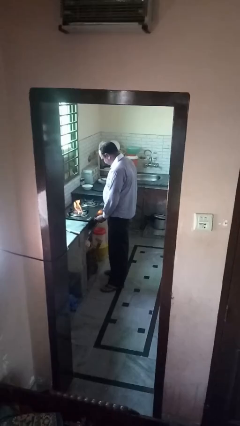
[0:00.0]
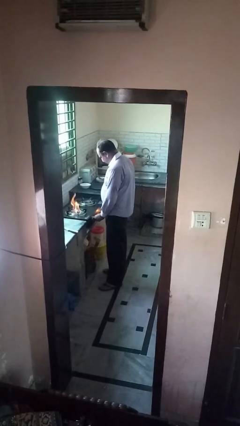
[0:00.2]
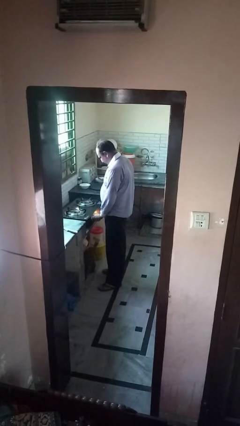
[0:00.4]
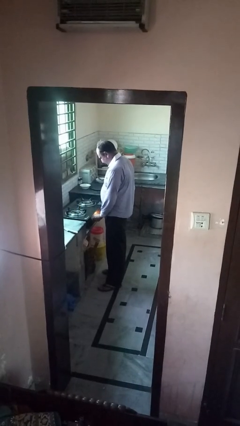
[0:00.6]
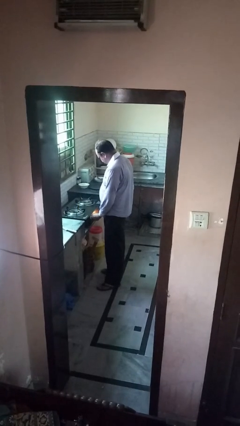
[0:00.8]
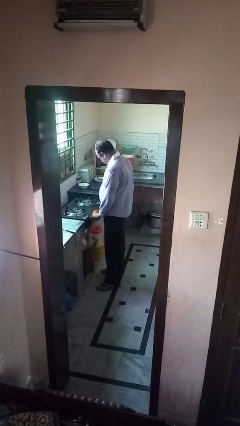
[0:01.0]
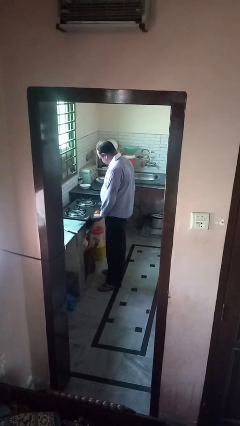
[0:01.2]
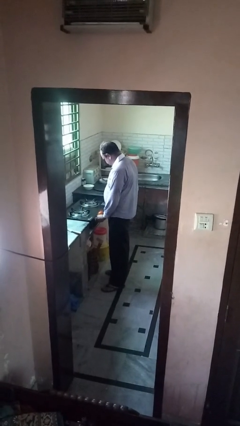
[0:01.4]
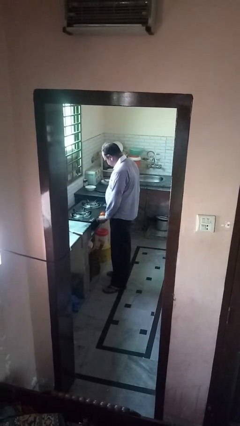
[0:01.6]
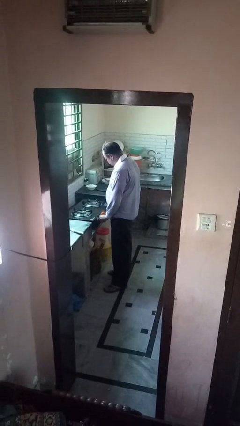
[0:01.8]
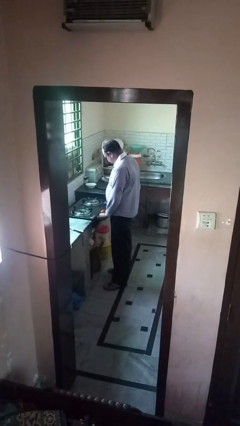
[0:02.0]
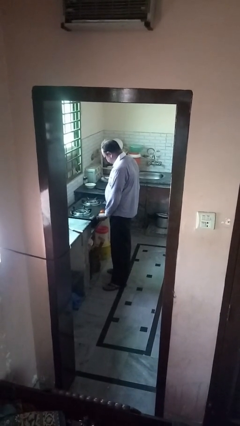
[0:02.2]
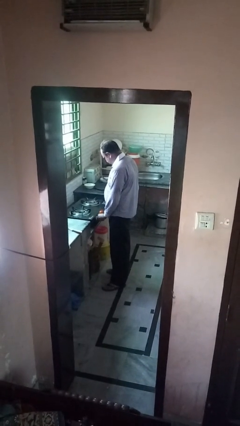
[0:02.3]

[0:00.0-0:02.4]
person turns off stovetop

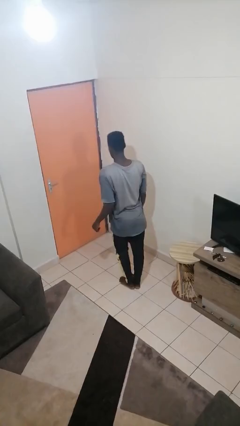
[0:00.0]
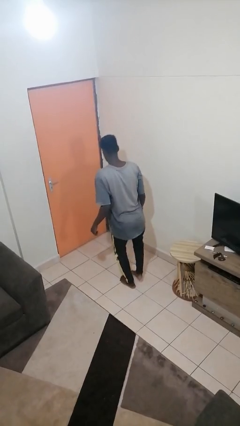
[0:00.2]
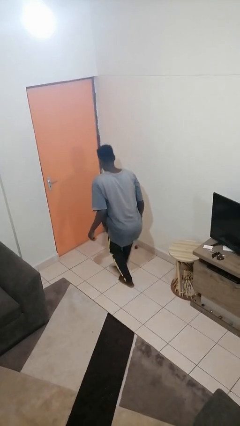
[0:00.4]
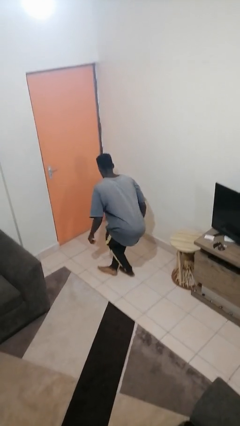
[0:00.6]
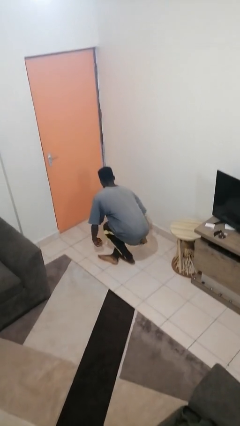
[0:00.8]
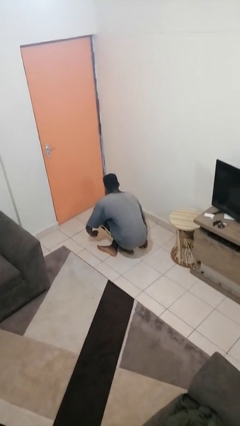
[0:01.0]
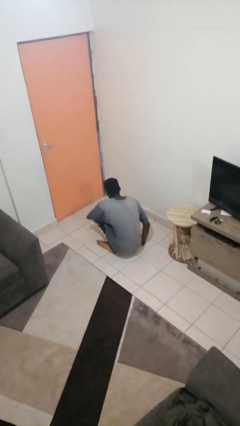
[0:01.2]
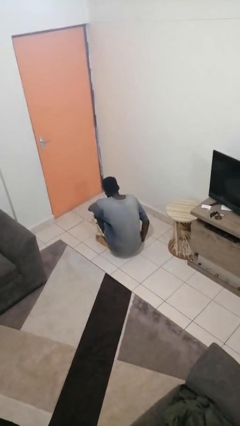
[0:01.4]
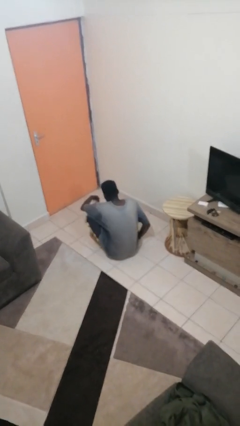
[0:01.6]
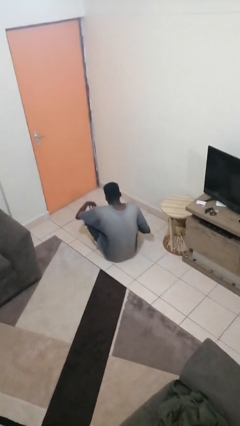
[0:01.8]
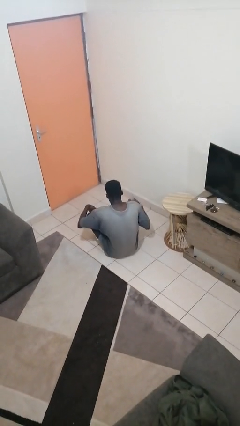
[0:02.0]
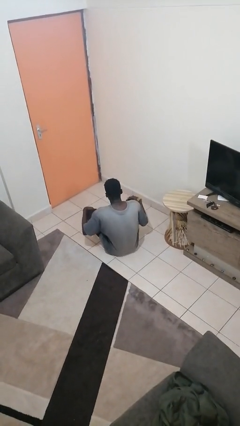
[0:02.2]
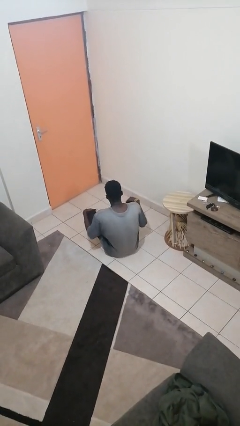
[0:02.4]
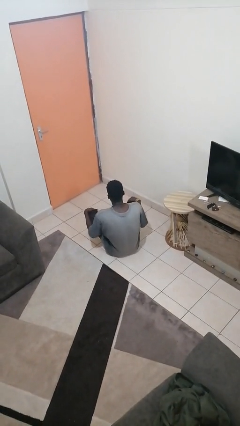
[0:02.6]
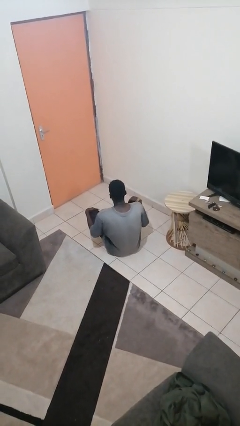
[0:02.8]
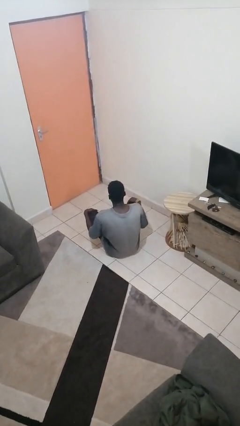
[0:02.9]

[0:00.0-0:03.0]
person sits crisscross

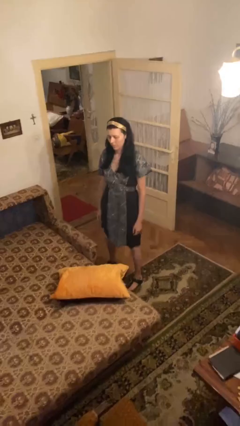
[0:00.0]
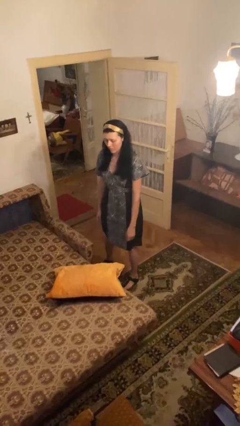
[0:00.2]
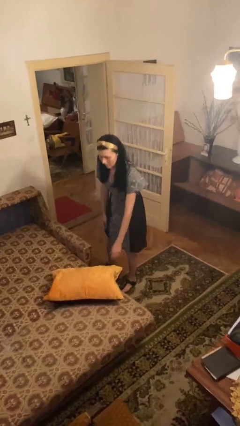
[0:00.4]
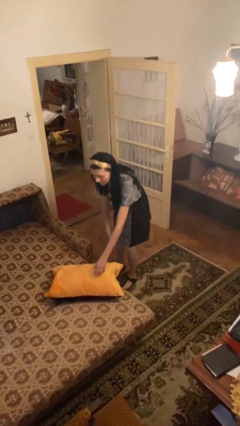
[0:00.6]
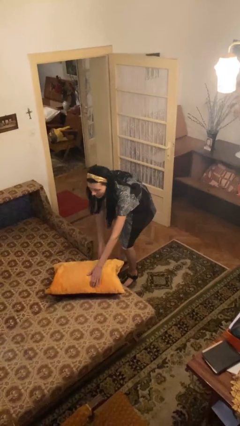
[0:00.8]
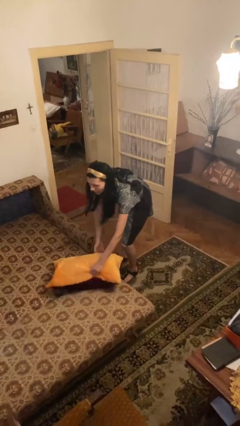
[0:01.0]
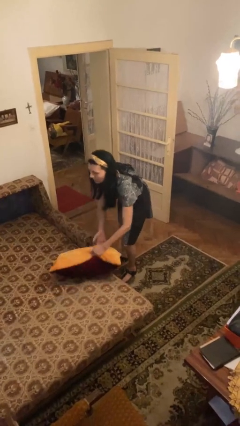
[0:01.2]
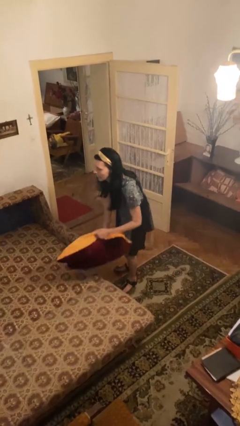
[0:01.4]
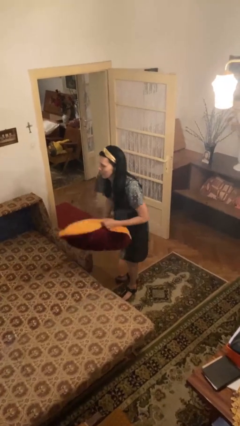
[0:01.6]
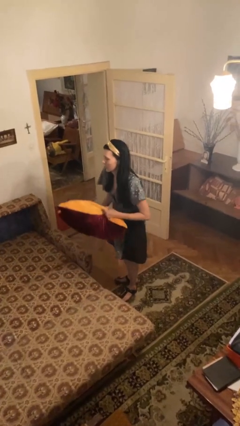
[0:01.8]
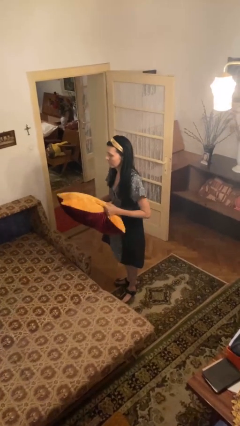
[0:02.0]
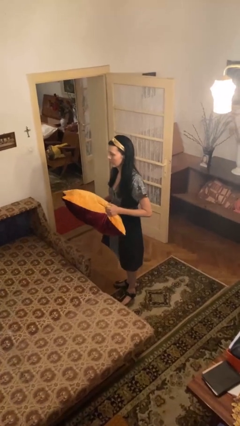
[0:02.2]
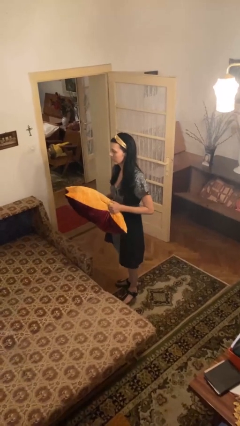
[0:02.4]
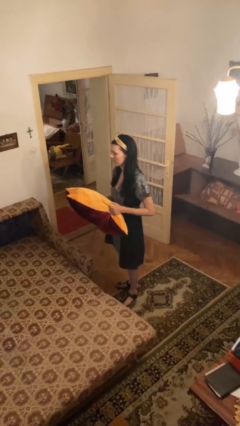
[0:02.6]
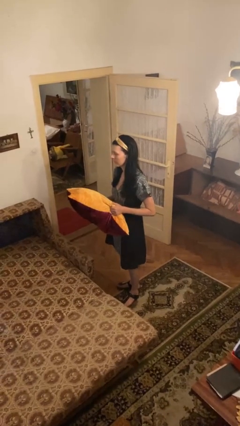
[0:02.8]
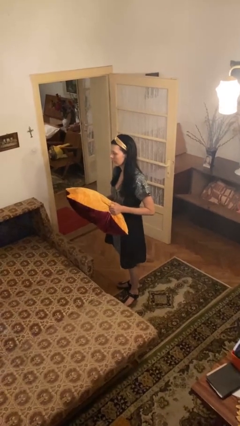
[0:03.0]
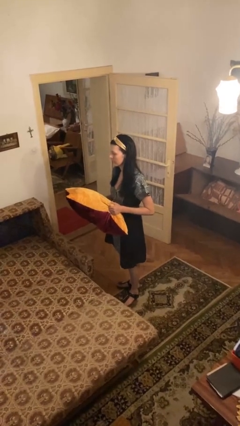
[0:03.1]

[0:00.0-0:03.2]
person picks up object from bed

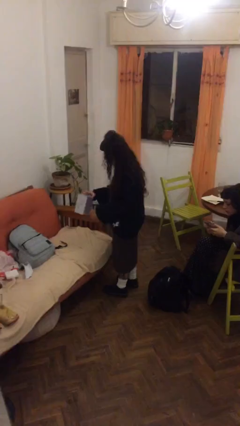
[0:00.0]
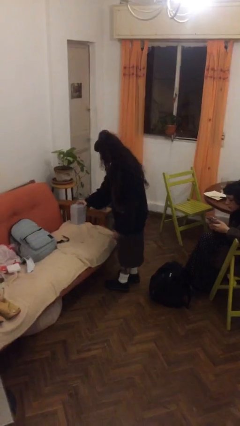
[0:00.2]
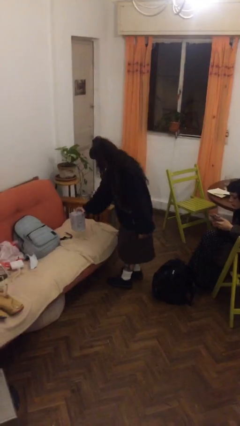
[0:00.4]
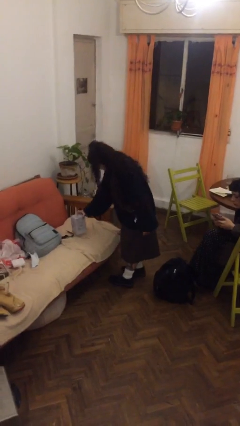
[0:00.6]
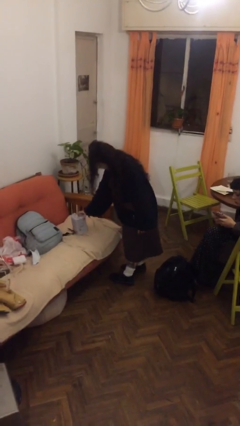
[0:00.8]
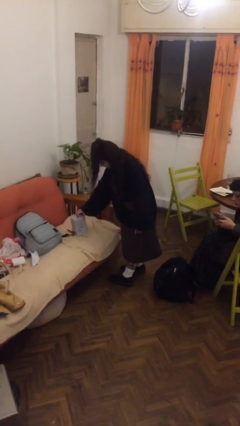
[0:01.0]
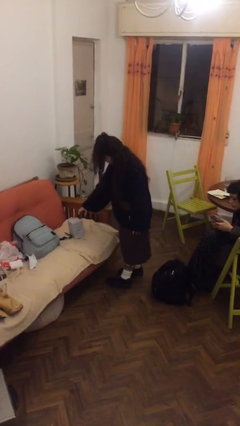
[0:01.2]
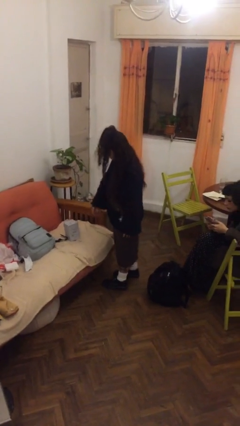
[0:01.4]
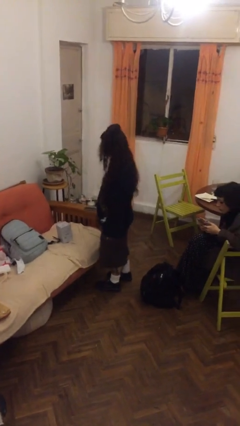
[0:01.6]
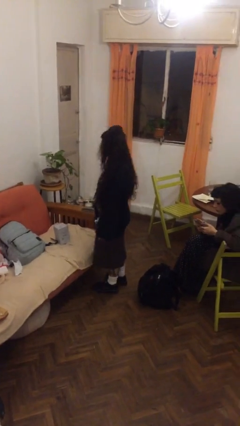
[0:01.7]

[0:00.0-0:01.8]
person puts down object on couch

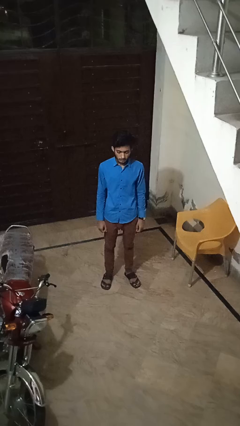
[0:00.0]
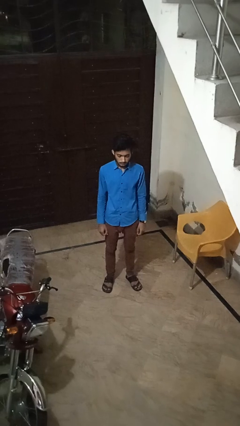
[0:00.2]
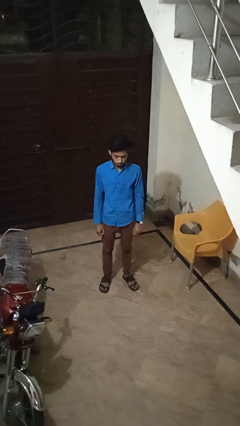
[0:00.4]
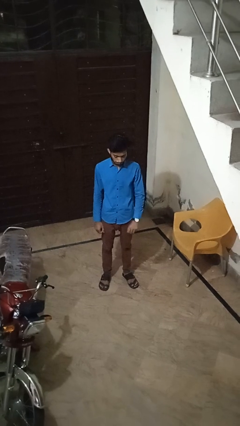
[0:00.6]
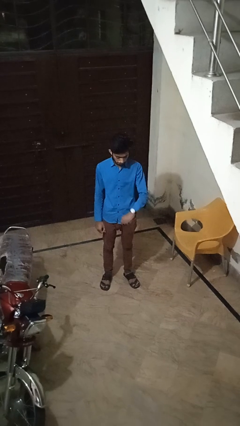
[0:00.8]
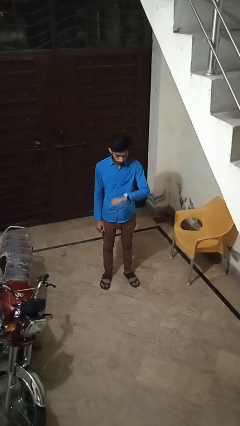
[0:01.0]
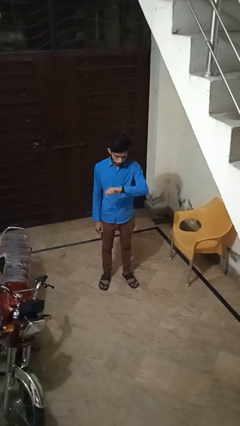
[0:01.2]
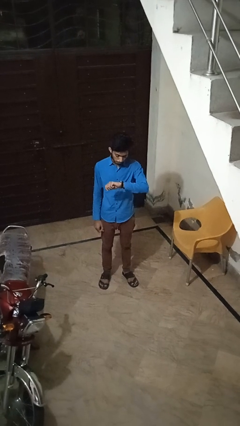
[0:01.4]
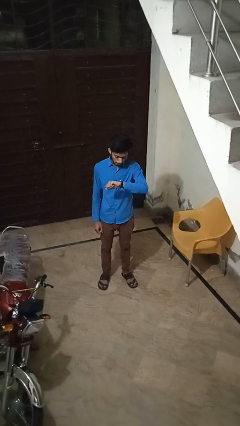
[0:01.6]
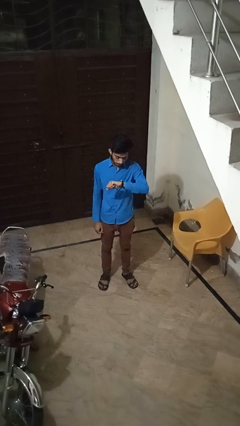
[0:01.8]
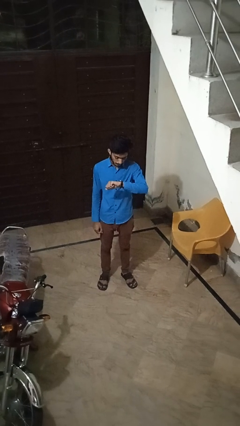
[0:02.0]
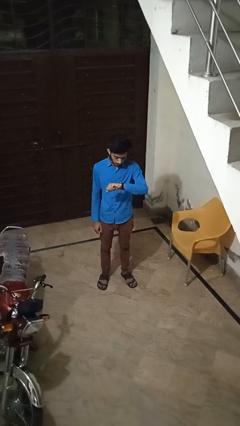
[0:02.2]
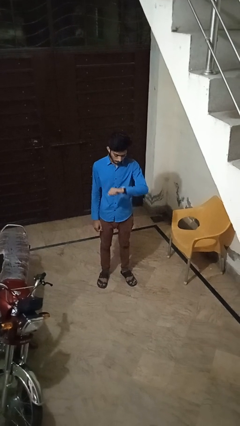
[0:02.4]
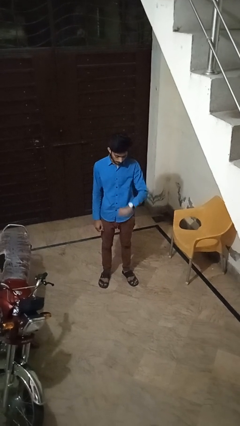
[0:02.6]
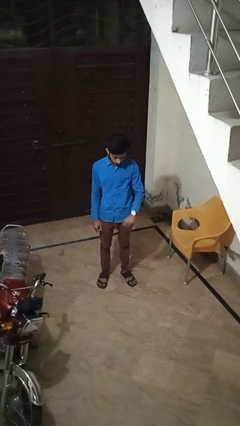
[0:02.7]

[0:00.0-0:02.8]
person looks at wristwatch

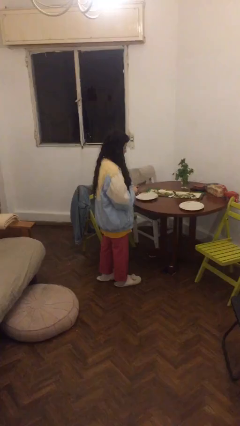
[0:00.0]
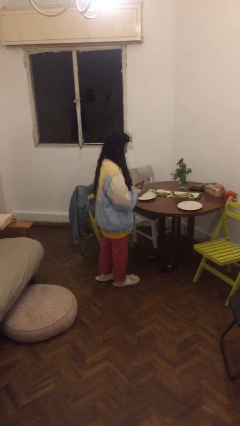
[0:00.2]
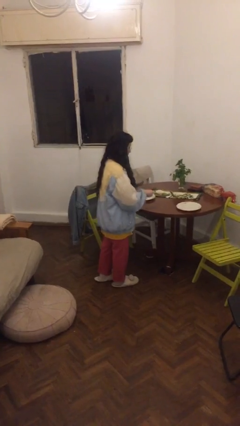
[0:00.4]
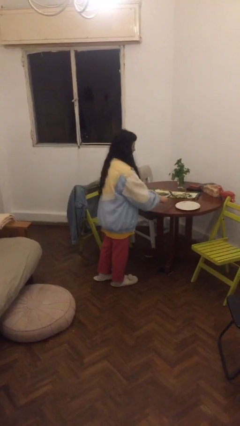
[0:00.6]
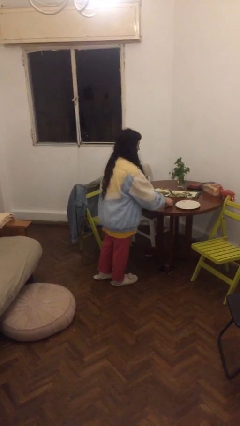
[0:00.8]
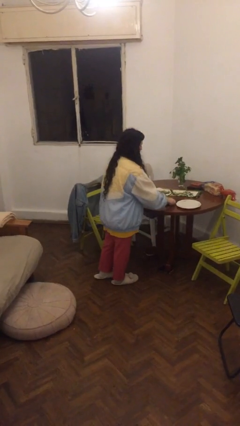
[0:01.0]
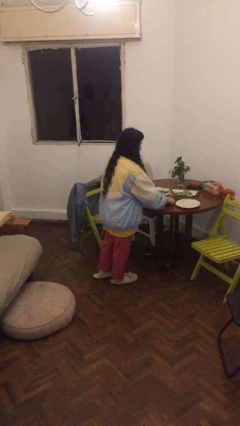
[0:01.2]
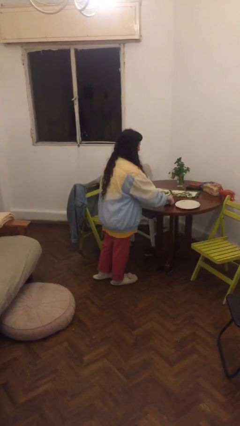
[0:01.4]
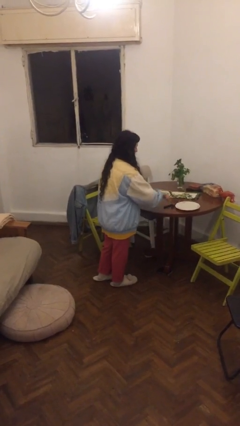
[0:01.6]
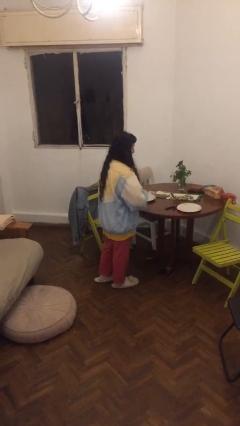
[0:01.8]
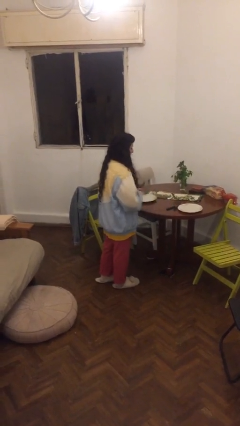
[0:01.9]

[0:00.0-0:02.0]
person sets table

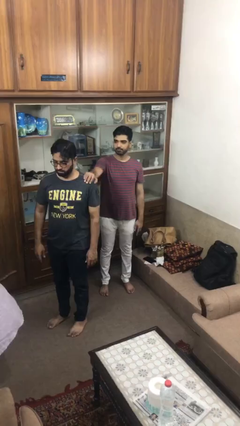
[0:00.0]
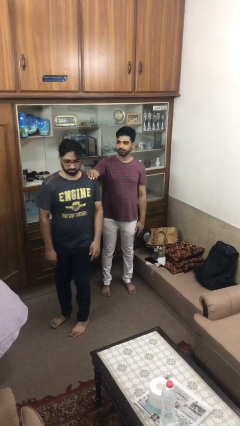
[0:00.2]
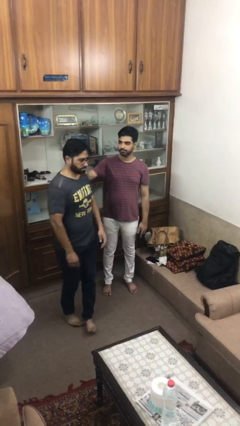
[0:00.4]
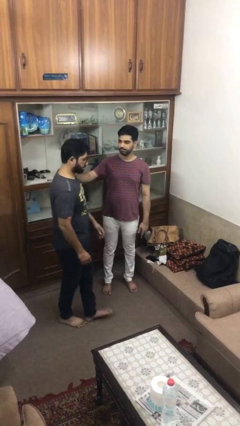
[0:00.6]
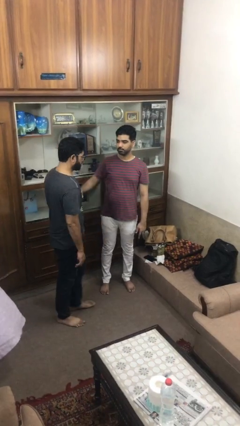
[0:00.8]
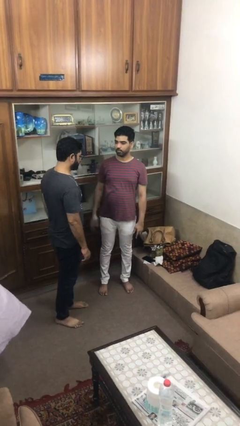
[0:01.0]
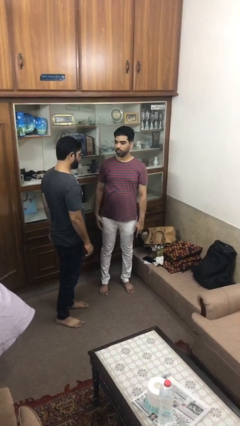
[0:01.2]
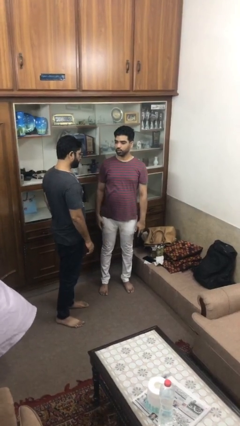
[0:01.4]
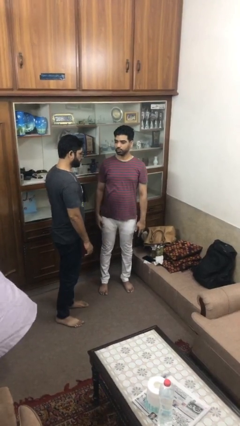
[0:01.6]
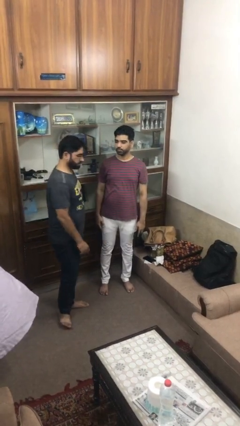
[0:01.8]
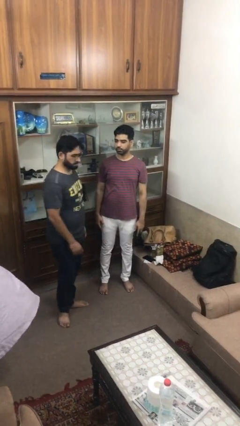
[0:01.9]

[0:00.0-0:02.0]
person spins person around
